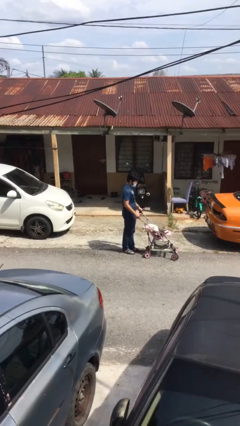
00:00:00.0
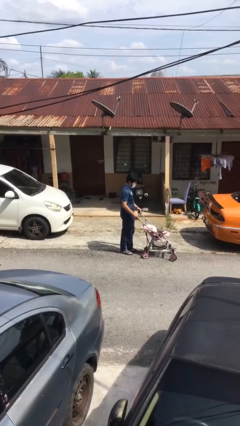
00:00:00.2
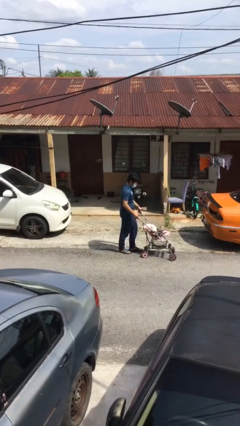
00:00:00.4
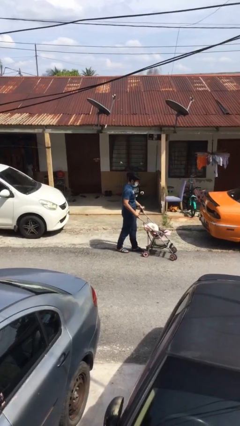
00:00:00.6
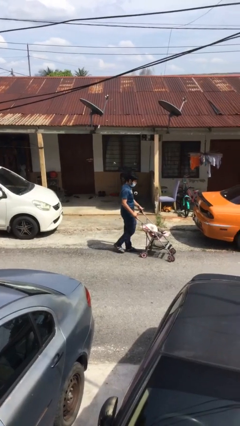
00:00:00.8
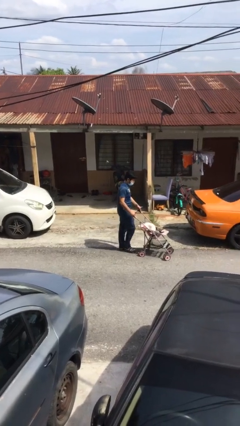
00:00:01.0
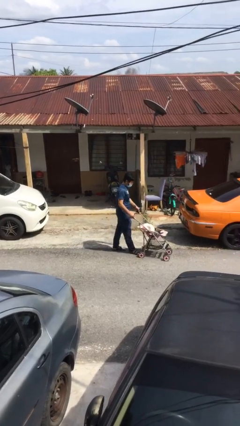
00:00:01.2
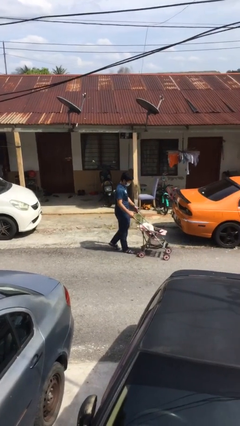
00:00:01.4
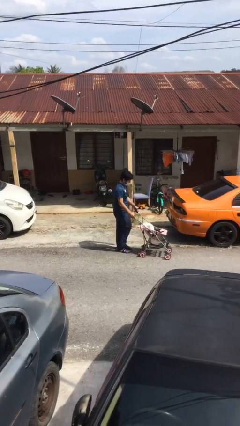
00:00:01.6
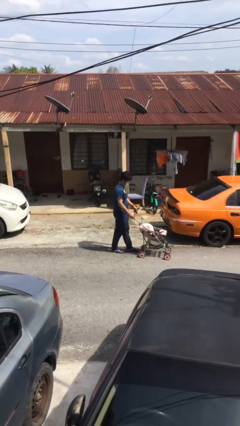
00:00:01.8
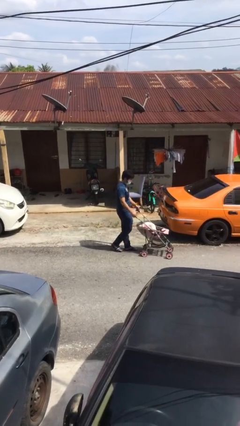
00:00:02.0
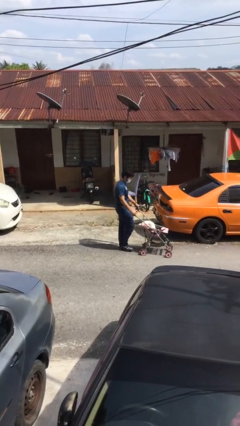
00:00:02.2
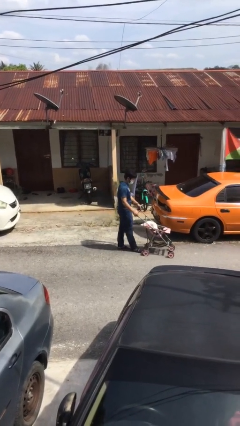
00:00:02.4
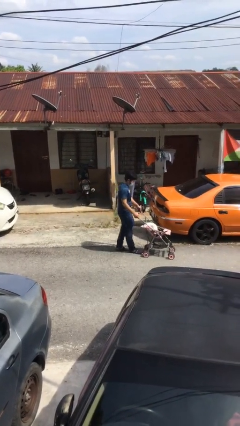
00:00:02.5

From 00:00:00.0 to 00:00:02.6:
person pushes wheeled cart

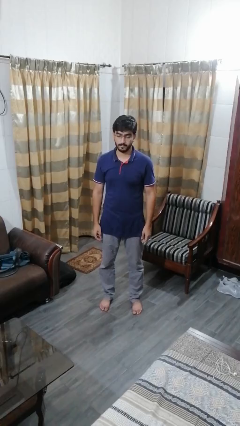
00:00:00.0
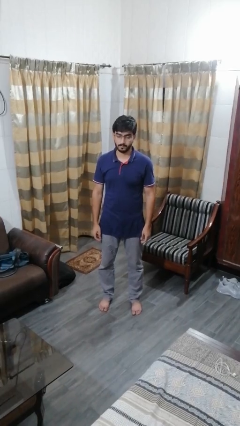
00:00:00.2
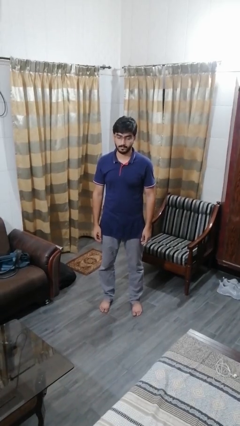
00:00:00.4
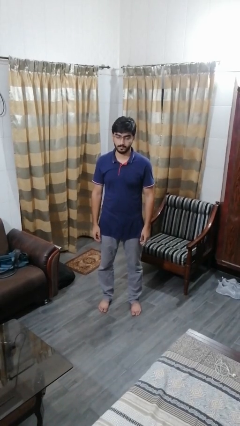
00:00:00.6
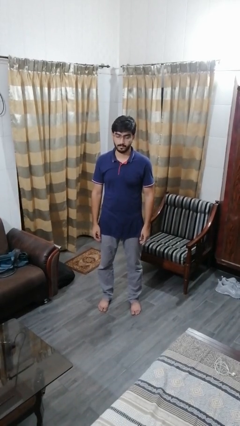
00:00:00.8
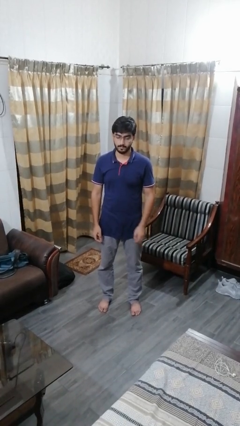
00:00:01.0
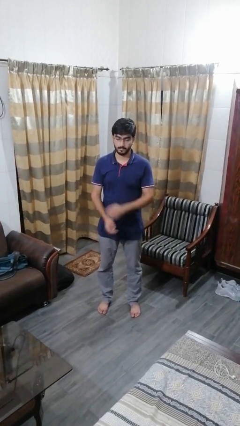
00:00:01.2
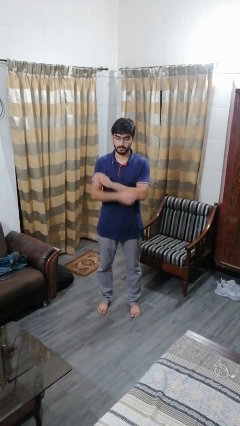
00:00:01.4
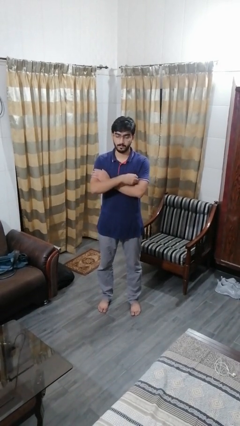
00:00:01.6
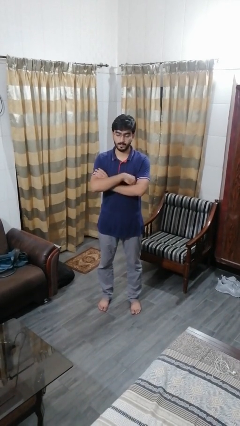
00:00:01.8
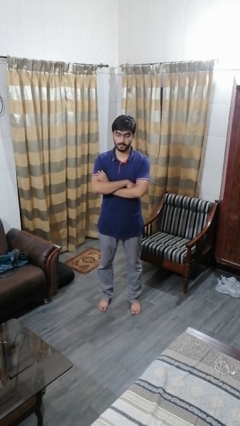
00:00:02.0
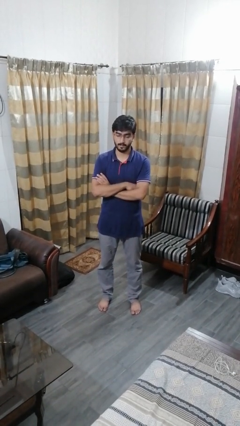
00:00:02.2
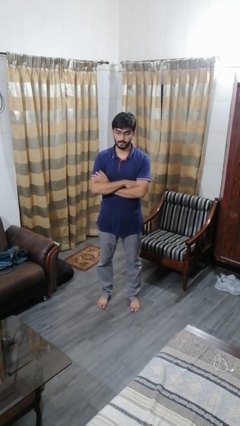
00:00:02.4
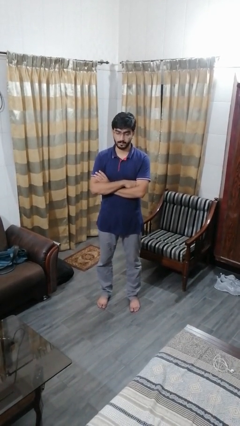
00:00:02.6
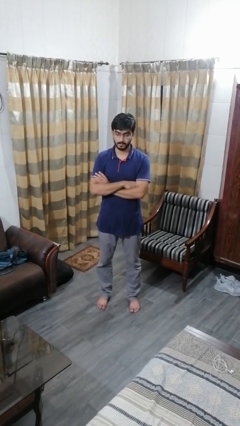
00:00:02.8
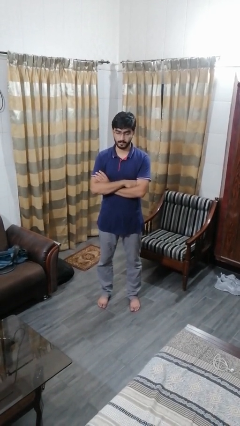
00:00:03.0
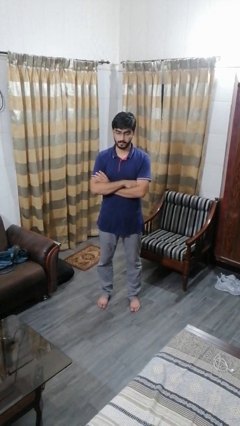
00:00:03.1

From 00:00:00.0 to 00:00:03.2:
person crosses arms

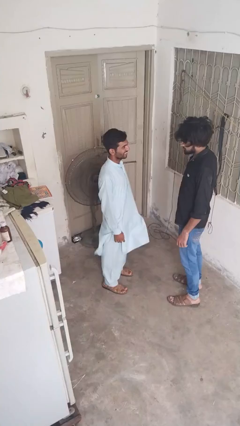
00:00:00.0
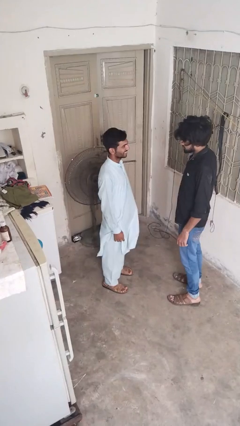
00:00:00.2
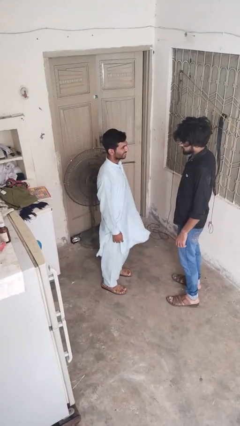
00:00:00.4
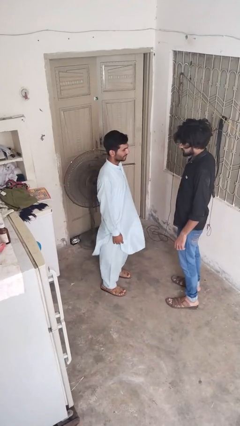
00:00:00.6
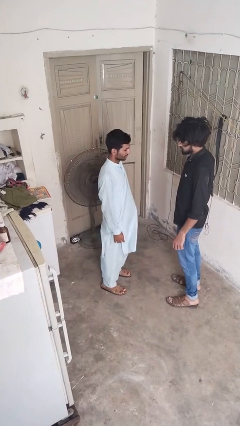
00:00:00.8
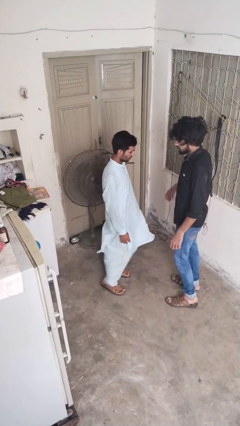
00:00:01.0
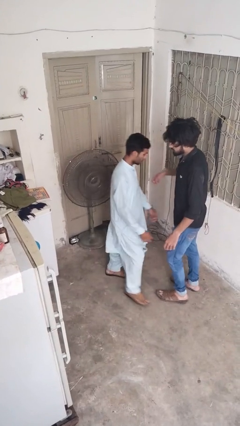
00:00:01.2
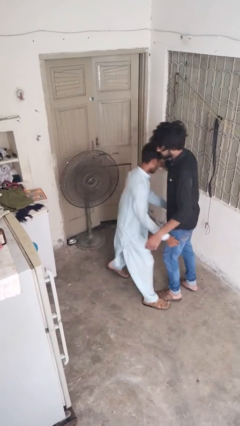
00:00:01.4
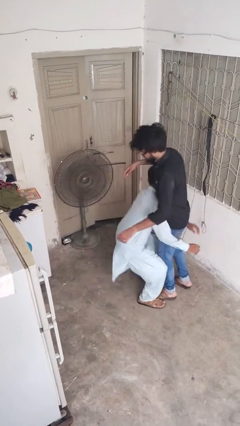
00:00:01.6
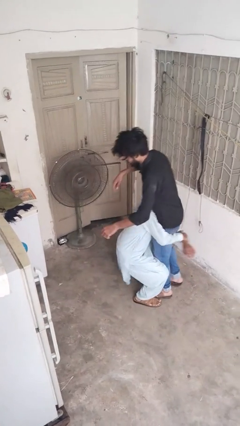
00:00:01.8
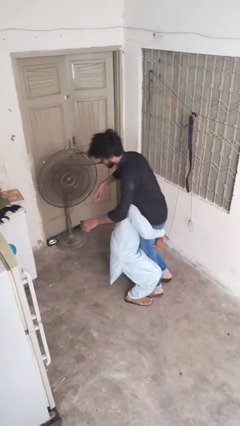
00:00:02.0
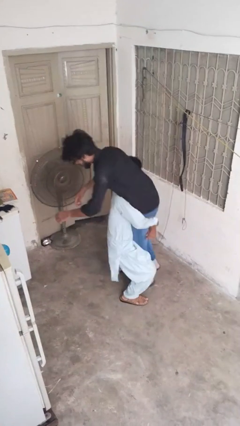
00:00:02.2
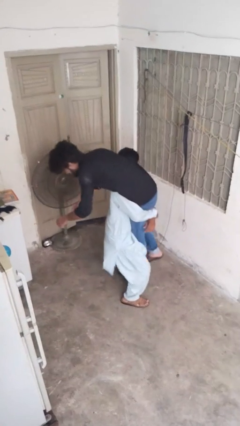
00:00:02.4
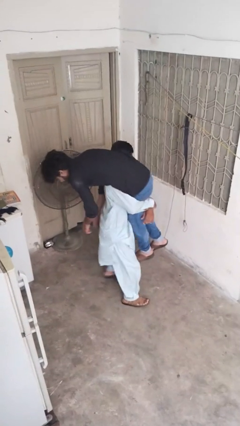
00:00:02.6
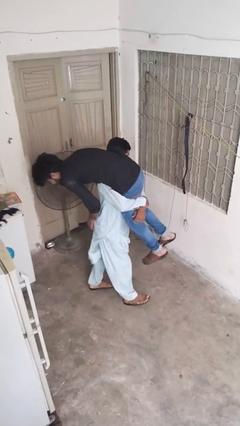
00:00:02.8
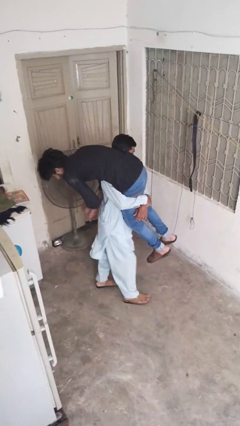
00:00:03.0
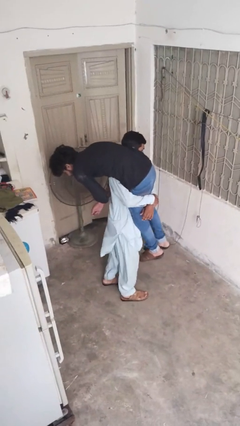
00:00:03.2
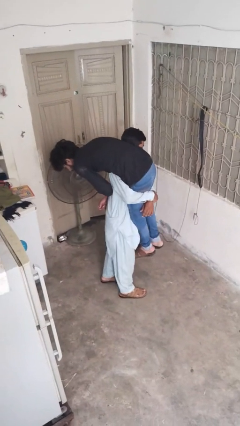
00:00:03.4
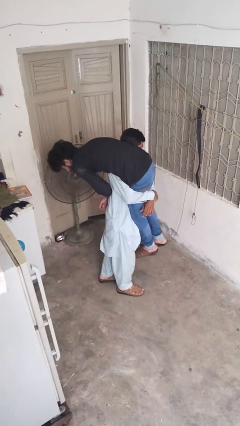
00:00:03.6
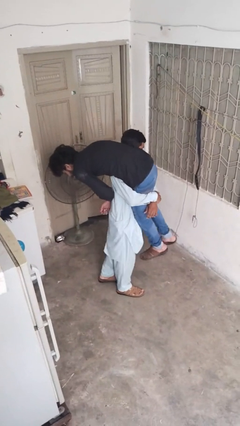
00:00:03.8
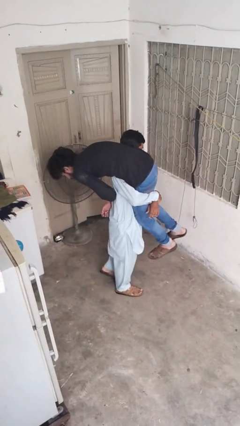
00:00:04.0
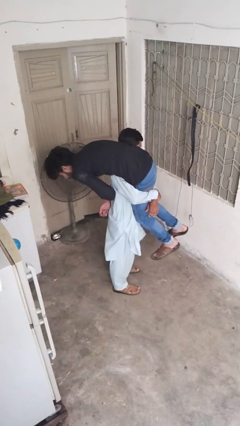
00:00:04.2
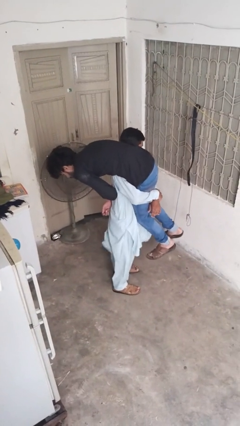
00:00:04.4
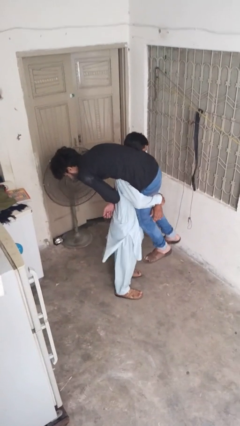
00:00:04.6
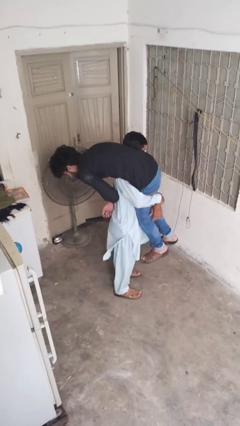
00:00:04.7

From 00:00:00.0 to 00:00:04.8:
person carries person over shoulder

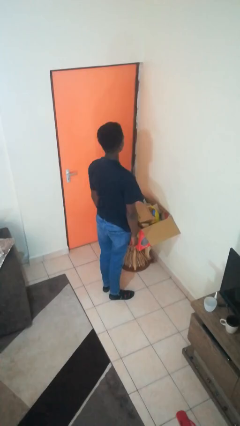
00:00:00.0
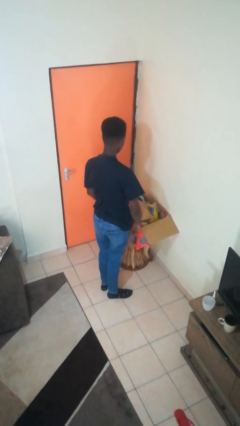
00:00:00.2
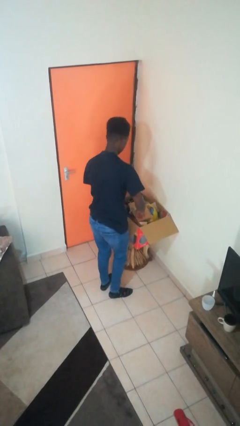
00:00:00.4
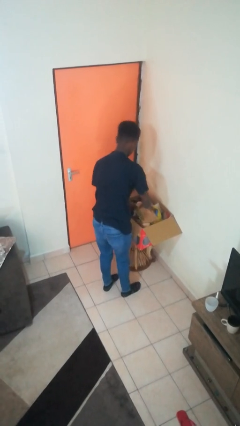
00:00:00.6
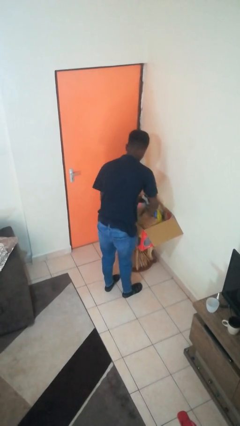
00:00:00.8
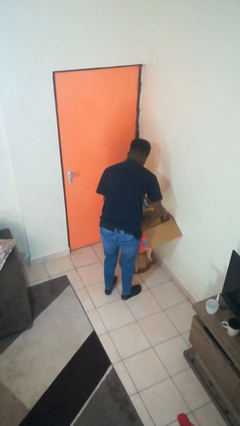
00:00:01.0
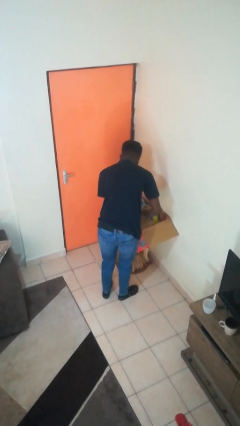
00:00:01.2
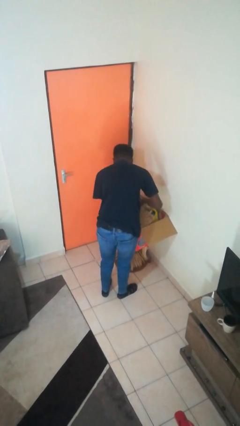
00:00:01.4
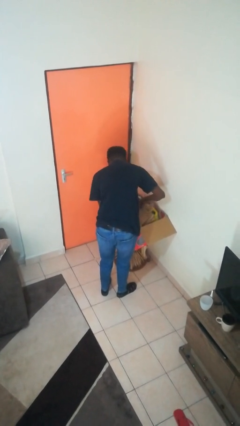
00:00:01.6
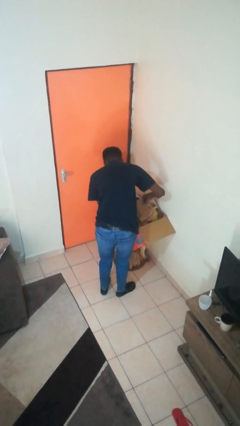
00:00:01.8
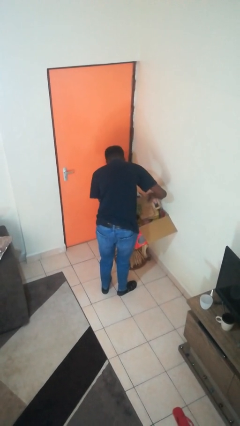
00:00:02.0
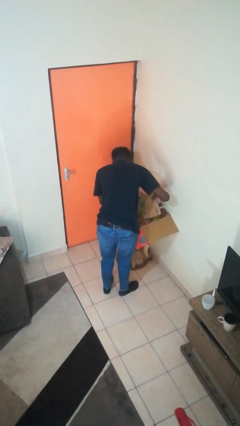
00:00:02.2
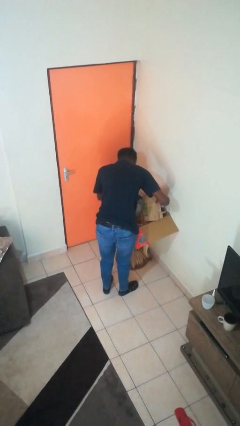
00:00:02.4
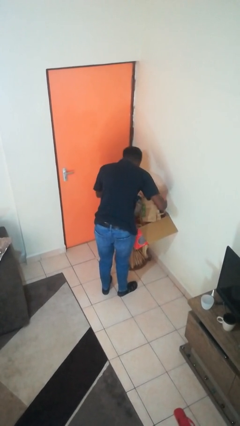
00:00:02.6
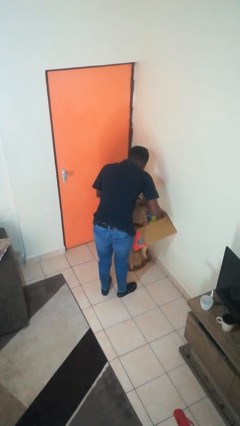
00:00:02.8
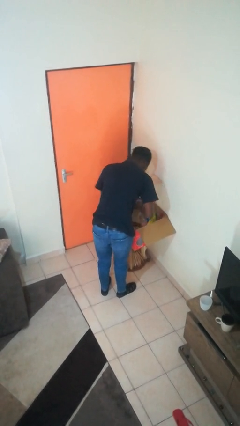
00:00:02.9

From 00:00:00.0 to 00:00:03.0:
person searches in box

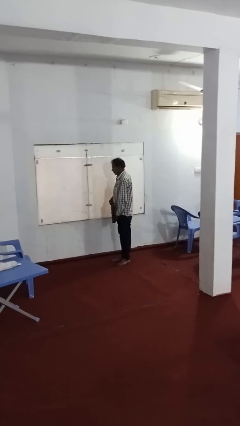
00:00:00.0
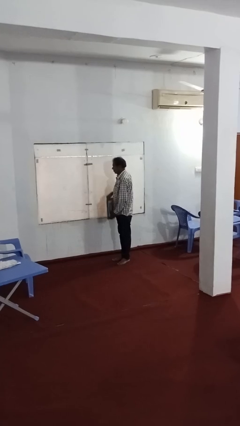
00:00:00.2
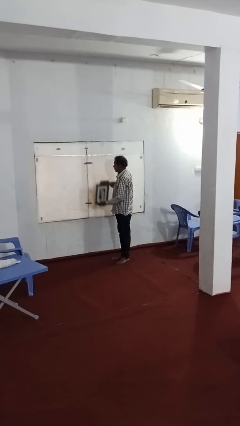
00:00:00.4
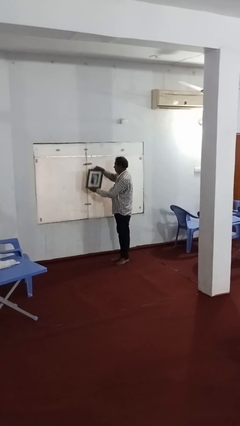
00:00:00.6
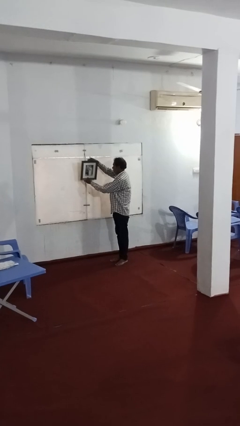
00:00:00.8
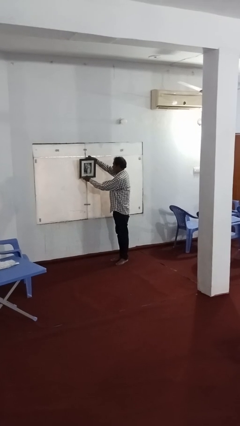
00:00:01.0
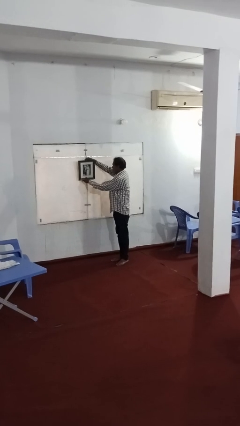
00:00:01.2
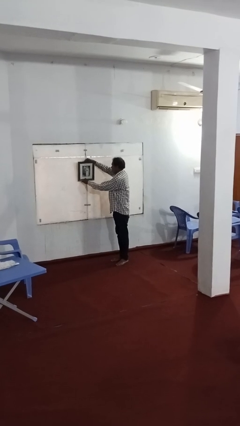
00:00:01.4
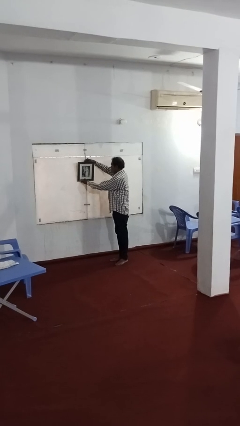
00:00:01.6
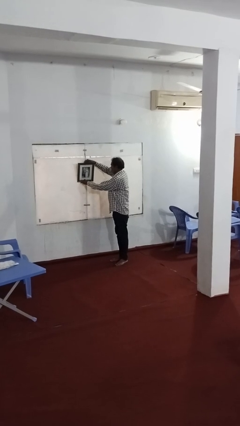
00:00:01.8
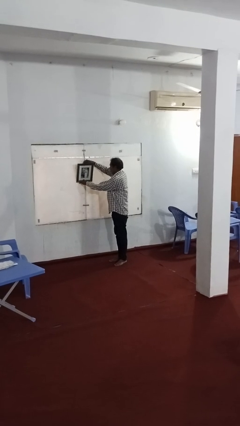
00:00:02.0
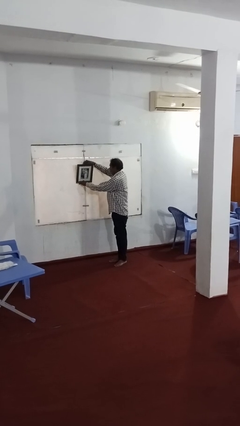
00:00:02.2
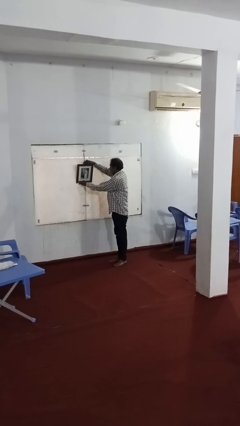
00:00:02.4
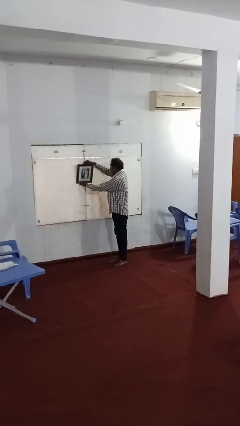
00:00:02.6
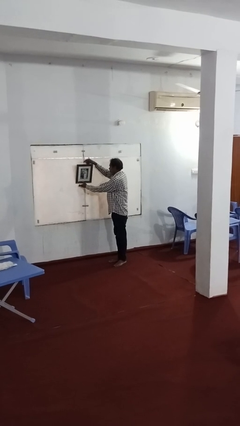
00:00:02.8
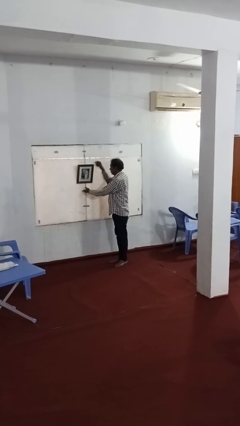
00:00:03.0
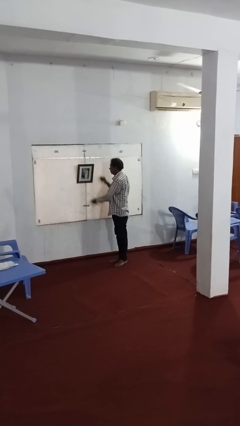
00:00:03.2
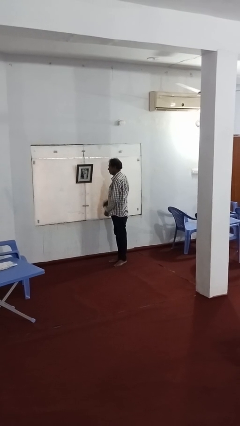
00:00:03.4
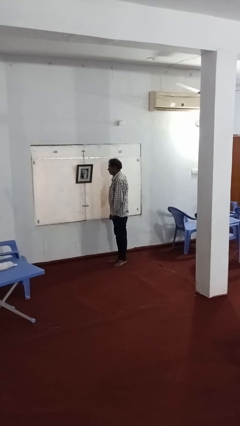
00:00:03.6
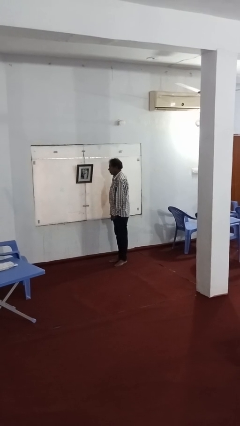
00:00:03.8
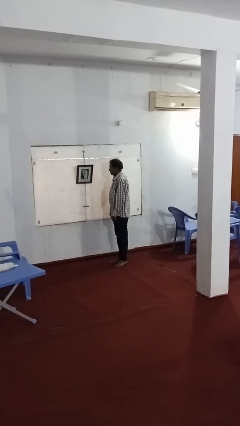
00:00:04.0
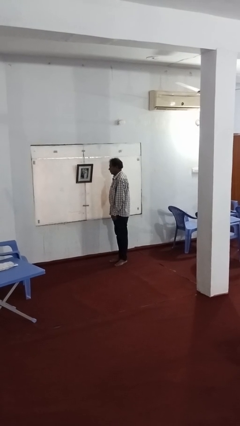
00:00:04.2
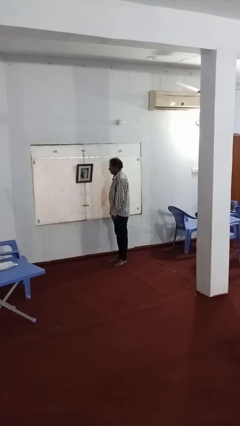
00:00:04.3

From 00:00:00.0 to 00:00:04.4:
person puts up picture frame
